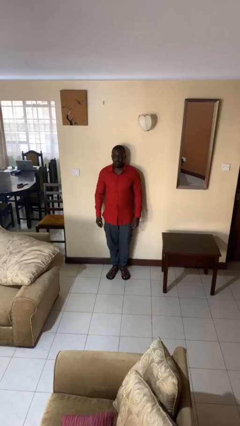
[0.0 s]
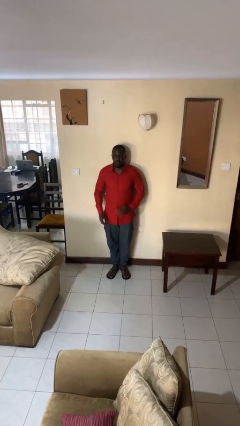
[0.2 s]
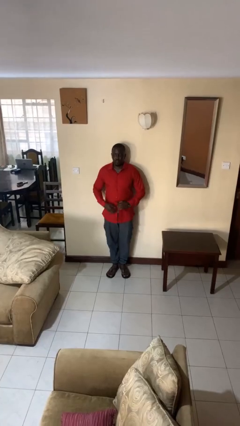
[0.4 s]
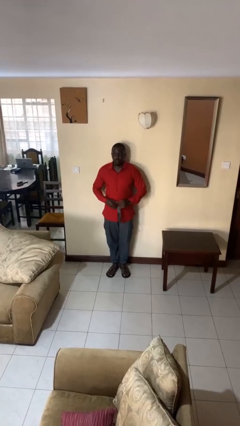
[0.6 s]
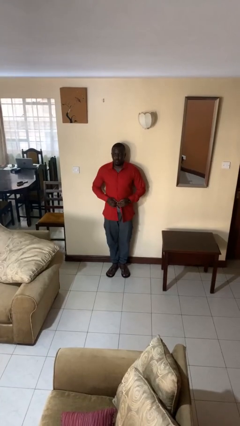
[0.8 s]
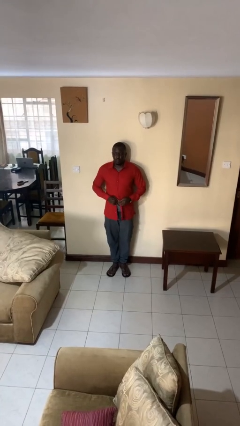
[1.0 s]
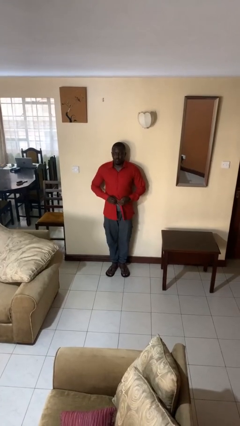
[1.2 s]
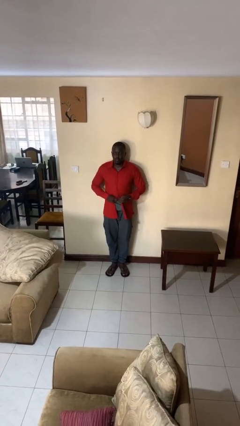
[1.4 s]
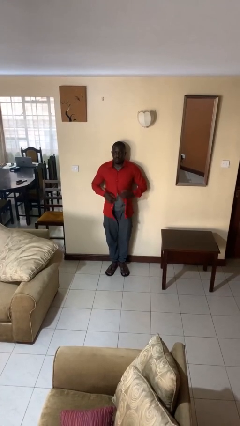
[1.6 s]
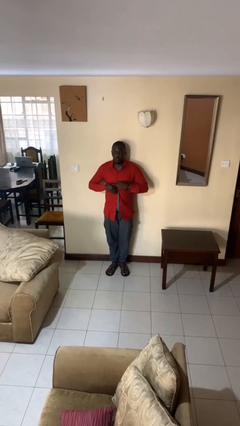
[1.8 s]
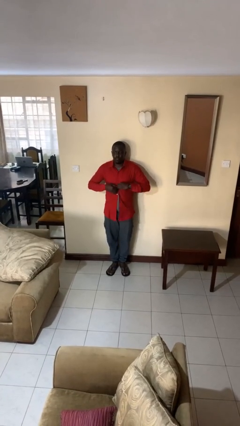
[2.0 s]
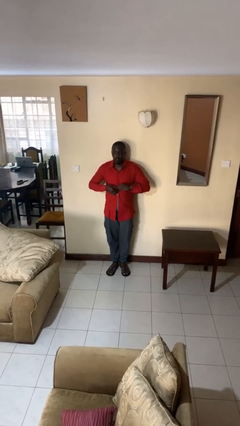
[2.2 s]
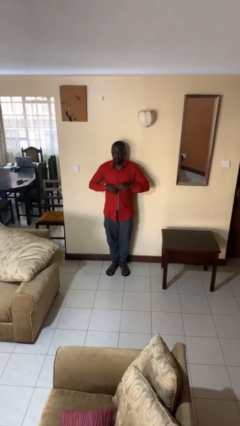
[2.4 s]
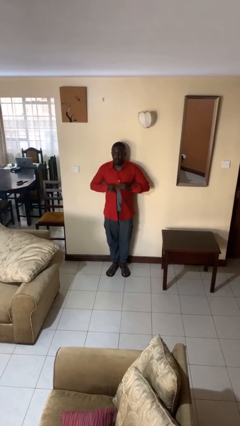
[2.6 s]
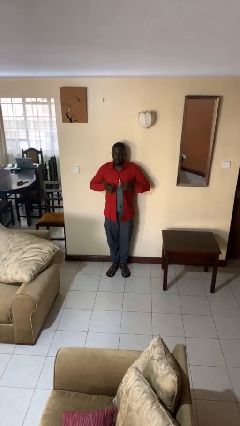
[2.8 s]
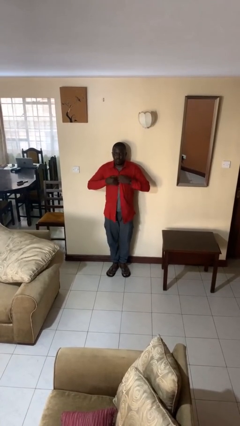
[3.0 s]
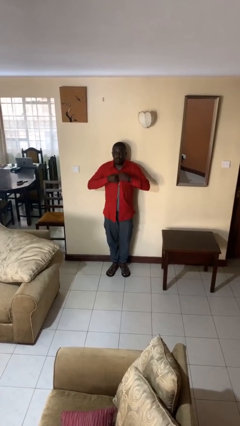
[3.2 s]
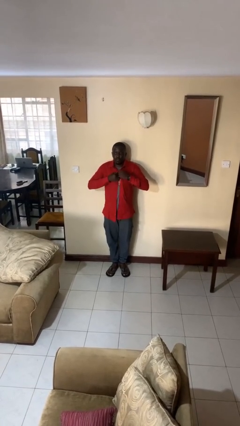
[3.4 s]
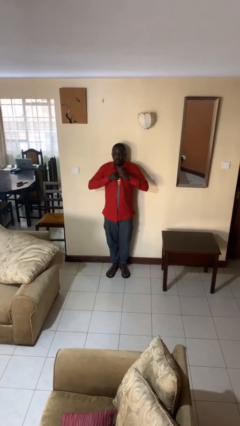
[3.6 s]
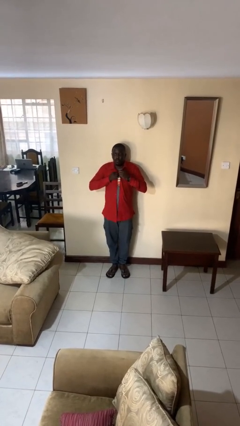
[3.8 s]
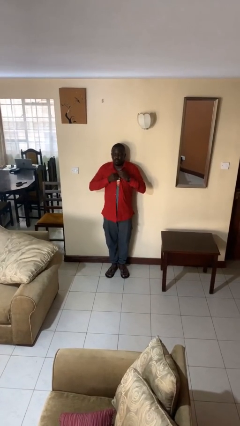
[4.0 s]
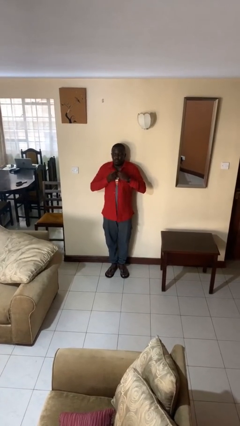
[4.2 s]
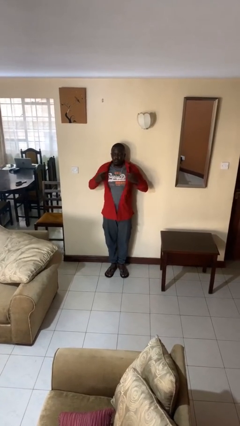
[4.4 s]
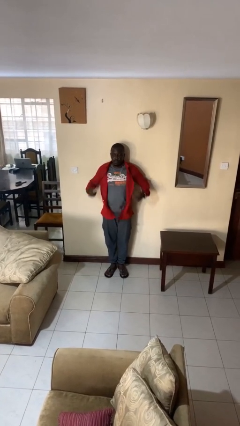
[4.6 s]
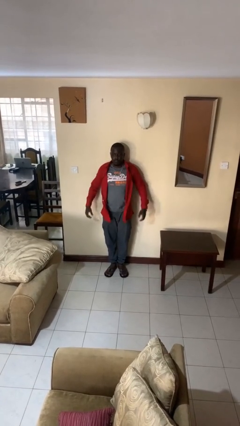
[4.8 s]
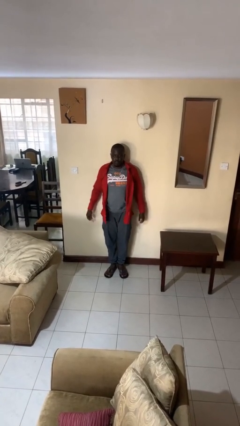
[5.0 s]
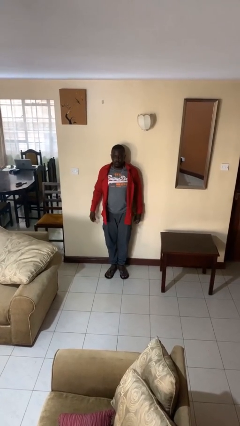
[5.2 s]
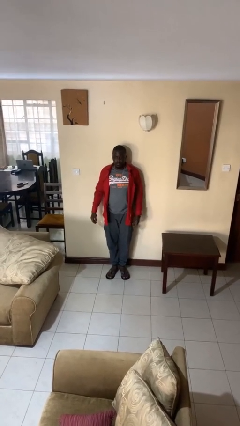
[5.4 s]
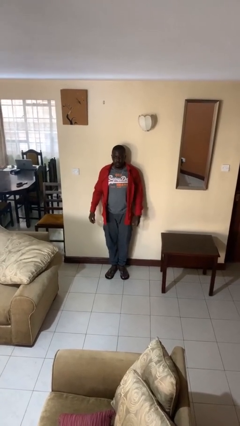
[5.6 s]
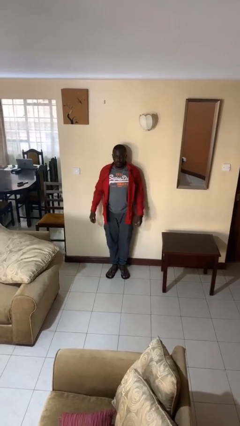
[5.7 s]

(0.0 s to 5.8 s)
person unbuttons shirt

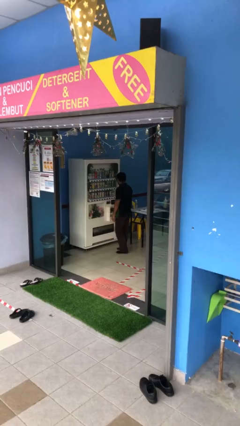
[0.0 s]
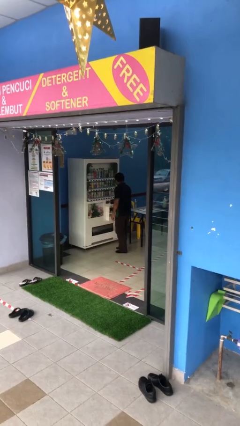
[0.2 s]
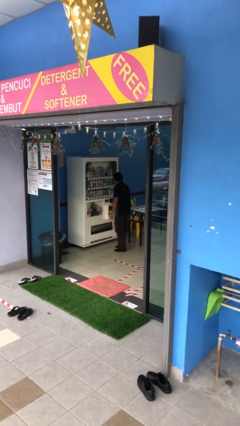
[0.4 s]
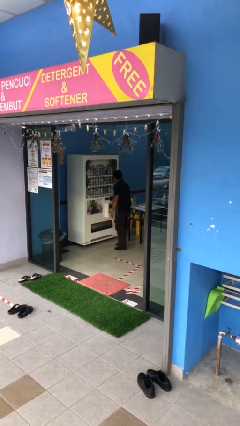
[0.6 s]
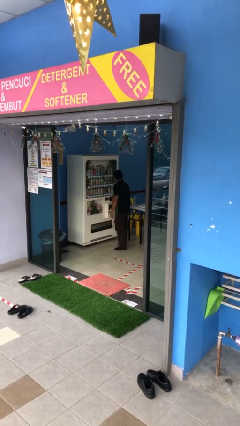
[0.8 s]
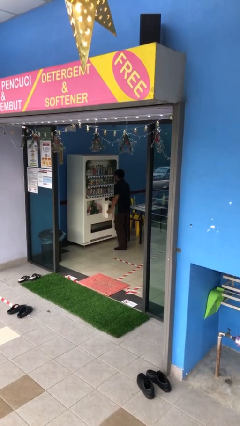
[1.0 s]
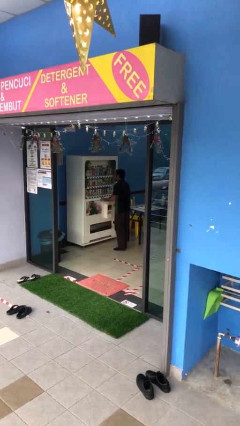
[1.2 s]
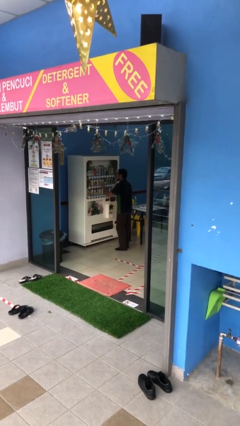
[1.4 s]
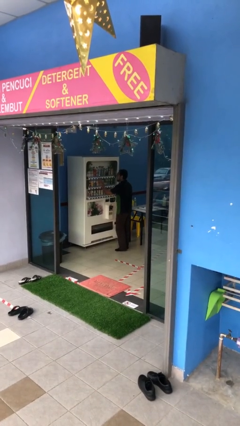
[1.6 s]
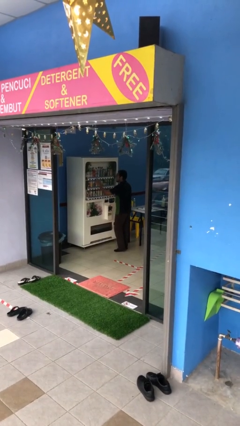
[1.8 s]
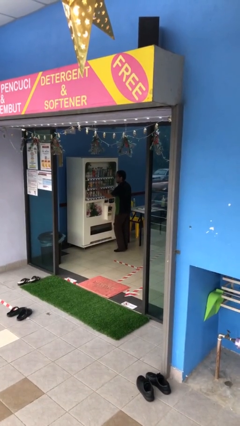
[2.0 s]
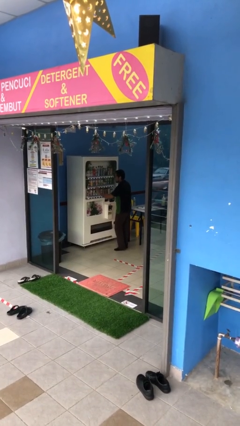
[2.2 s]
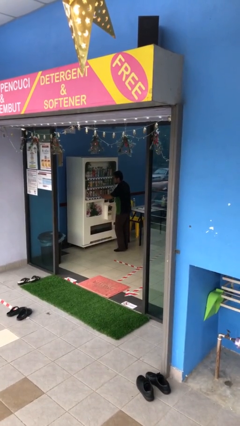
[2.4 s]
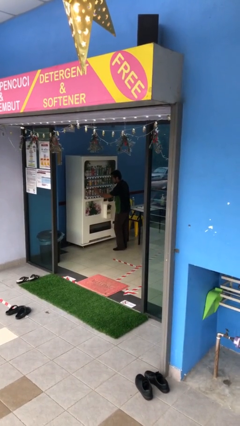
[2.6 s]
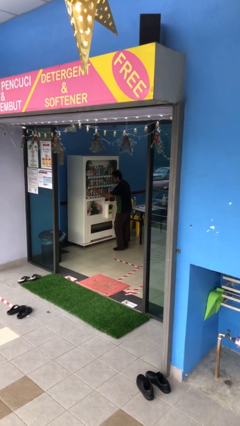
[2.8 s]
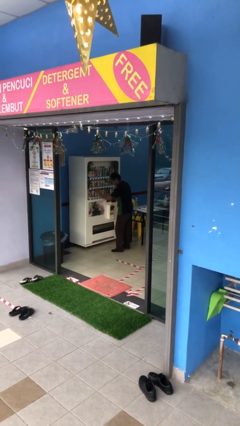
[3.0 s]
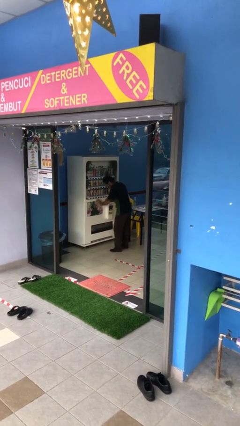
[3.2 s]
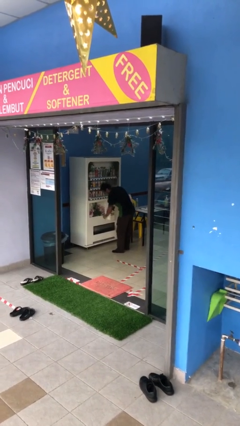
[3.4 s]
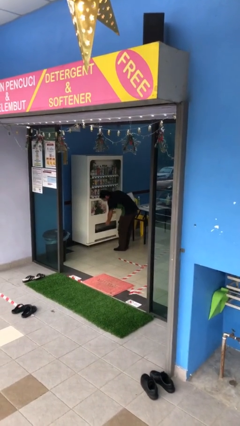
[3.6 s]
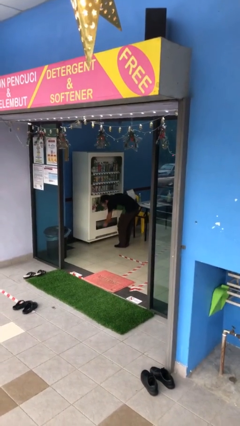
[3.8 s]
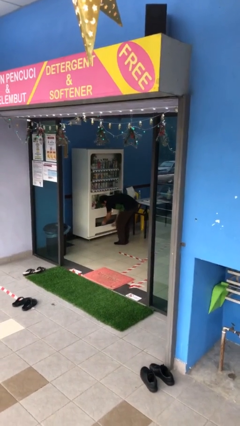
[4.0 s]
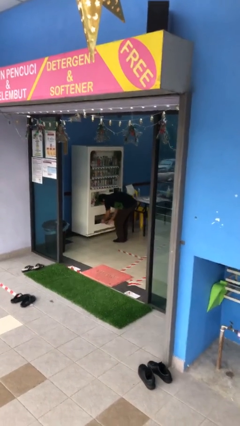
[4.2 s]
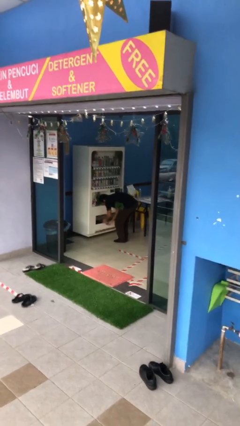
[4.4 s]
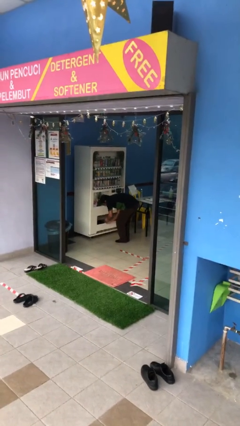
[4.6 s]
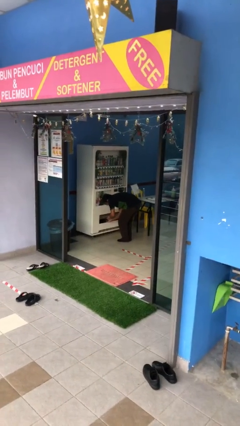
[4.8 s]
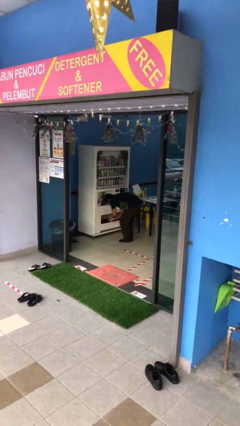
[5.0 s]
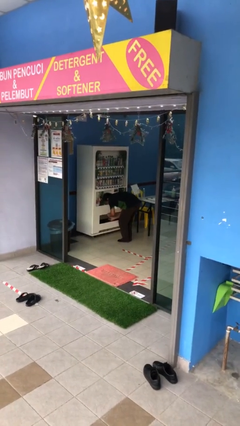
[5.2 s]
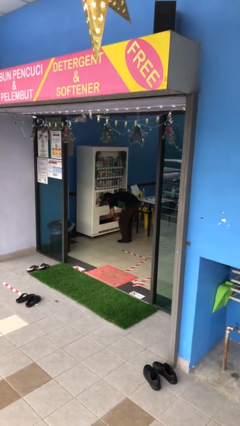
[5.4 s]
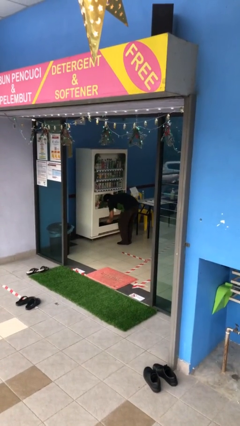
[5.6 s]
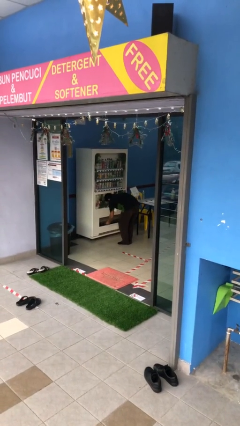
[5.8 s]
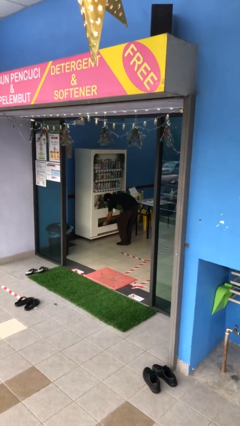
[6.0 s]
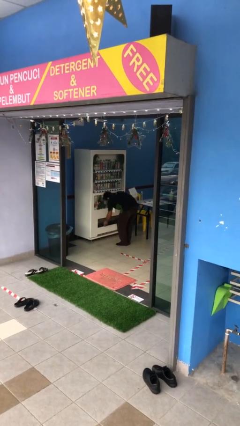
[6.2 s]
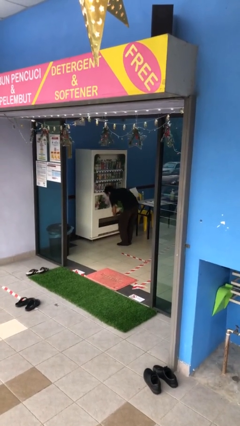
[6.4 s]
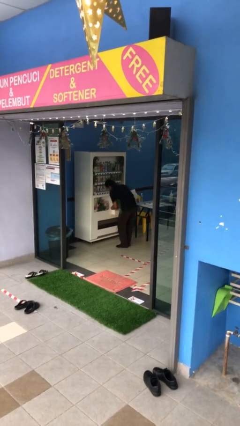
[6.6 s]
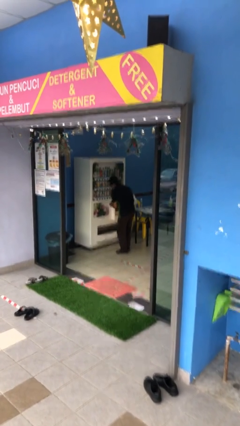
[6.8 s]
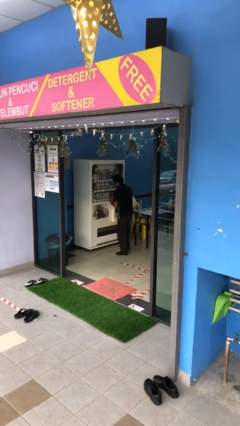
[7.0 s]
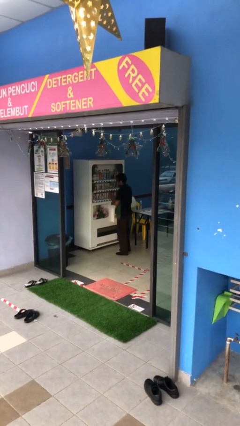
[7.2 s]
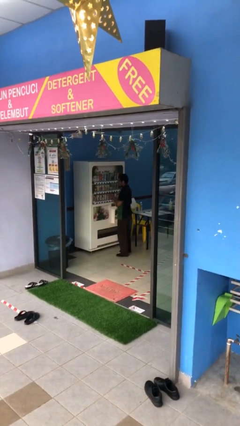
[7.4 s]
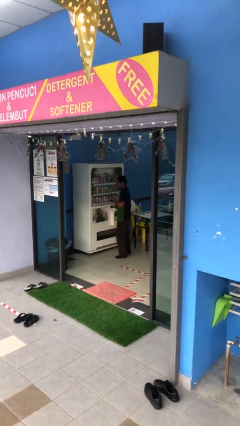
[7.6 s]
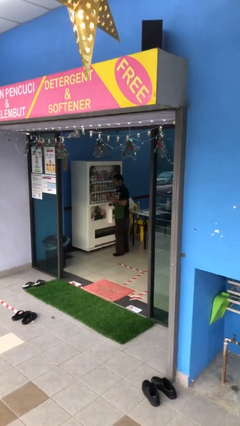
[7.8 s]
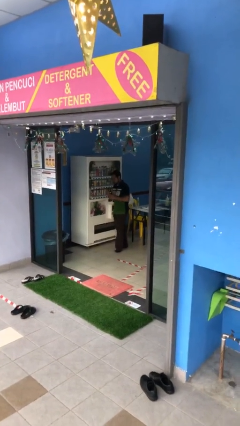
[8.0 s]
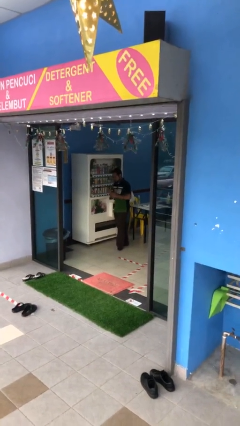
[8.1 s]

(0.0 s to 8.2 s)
person purchases from machine

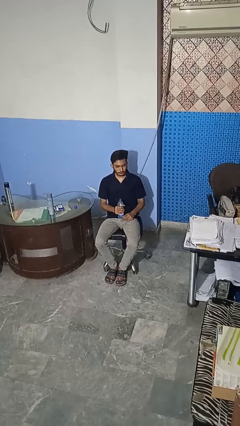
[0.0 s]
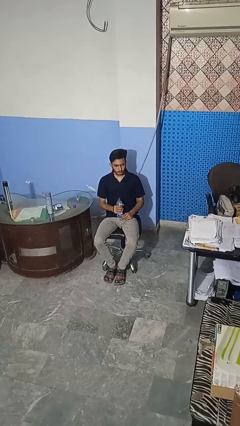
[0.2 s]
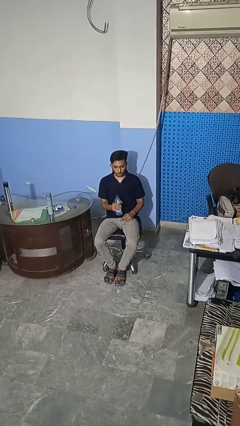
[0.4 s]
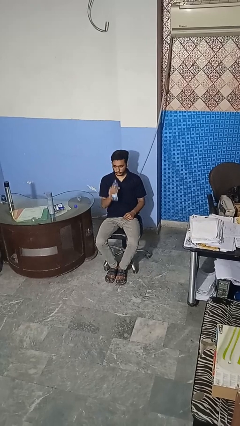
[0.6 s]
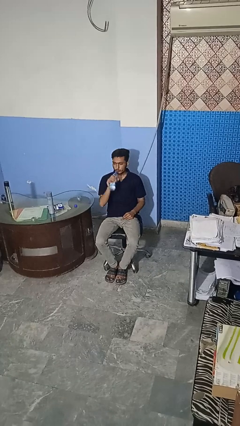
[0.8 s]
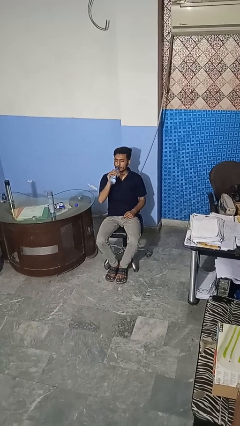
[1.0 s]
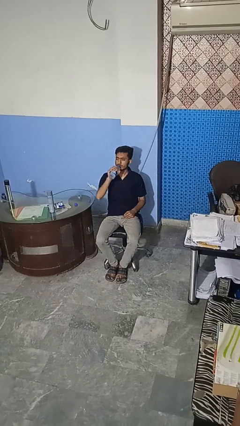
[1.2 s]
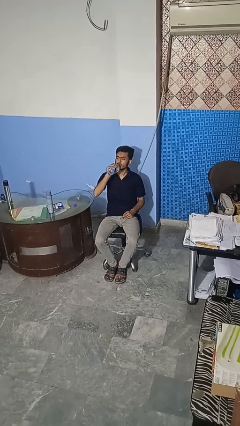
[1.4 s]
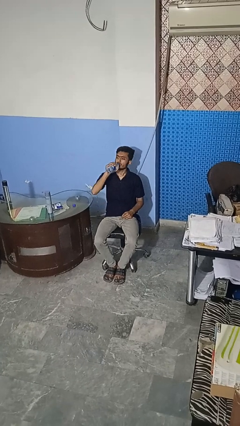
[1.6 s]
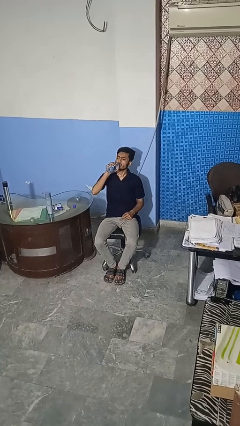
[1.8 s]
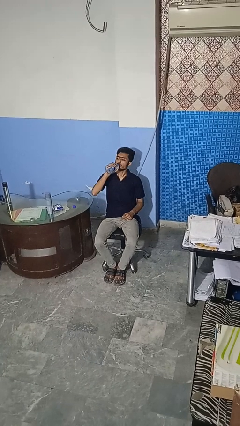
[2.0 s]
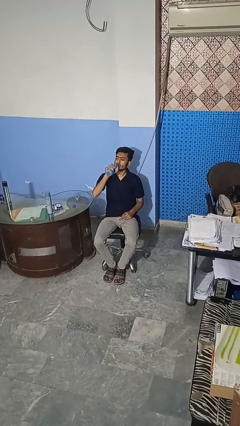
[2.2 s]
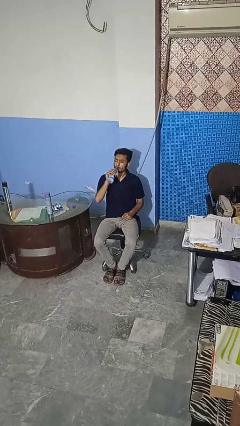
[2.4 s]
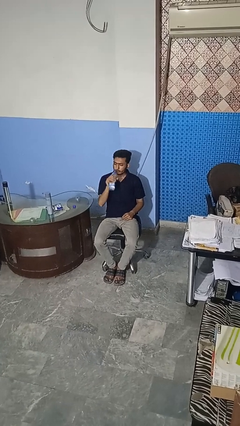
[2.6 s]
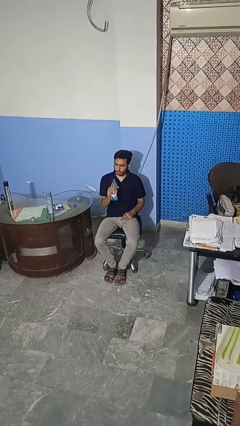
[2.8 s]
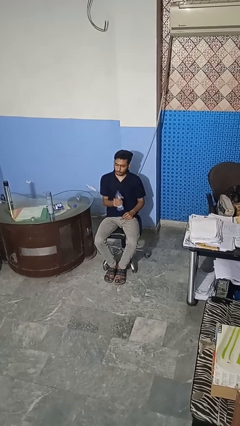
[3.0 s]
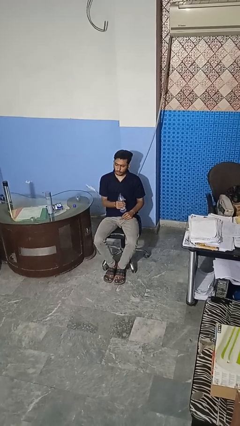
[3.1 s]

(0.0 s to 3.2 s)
person drinks from bottle

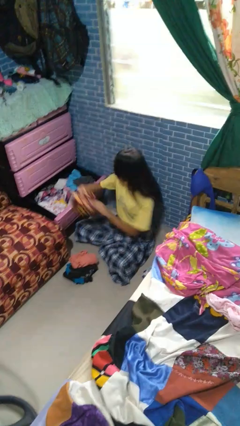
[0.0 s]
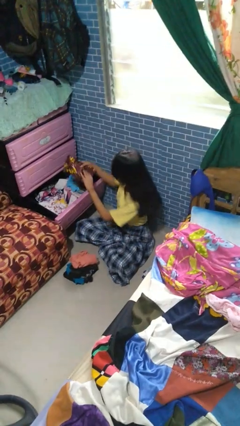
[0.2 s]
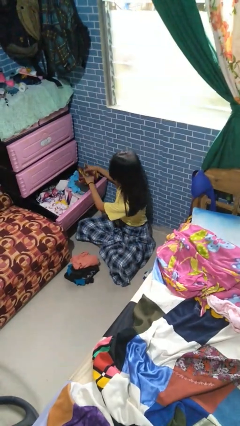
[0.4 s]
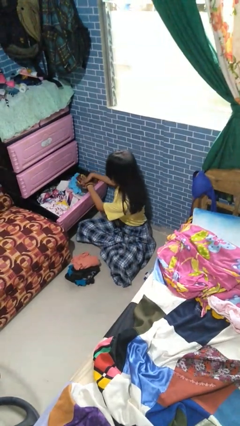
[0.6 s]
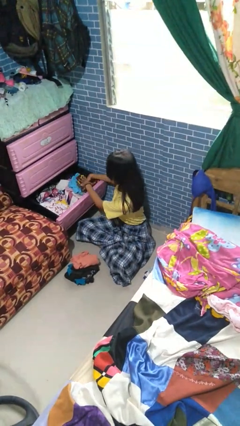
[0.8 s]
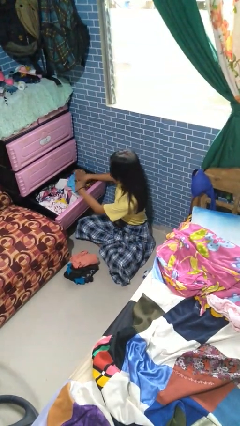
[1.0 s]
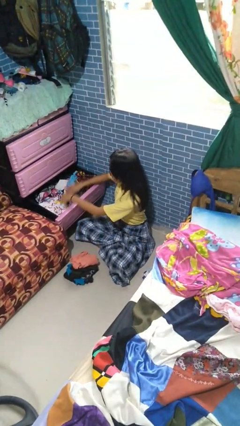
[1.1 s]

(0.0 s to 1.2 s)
person puts clothes into dresser
